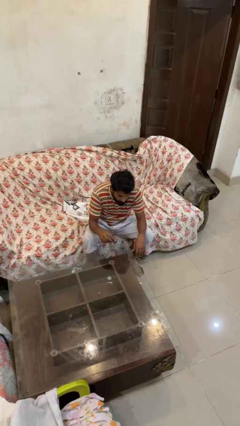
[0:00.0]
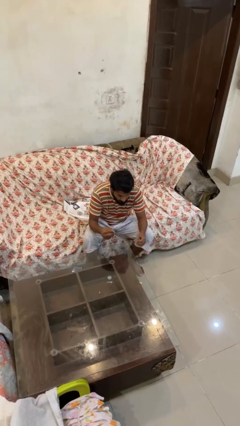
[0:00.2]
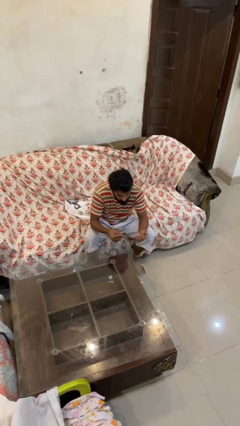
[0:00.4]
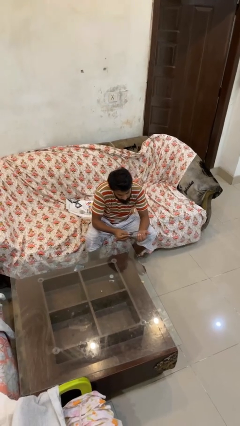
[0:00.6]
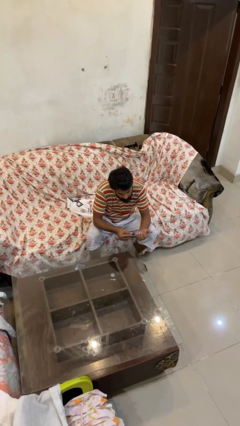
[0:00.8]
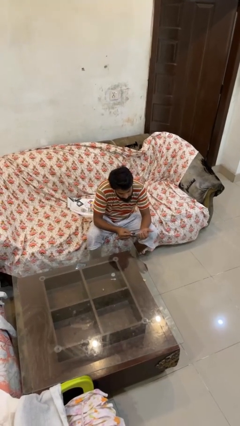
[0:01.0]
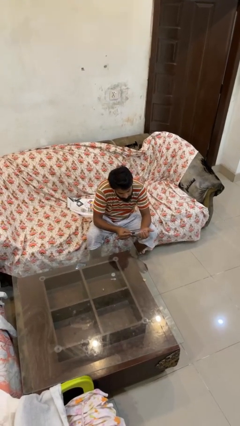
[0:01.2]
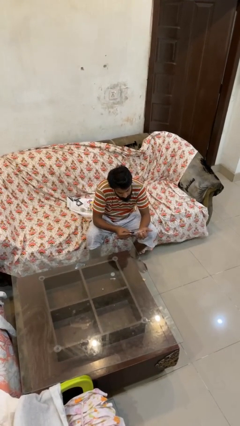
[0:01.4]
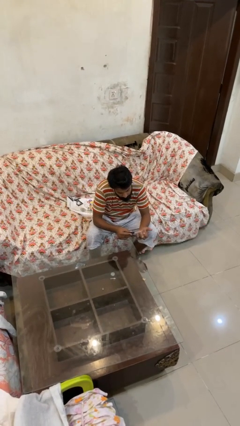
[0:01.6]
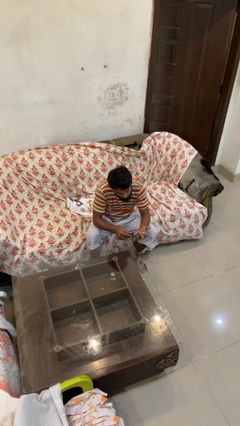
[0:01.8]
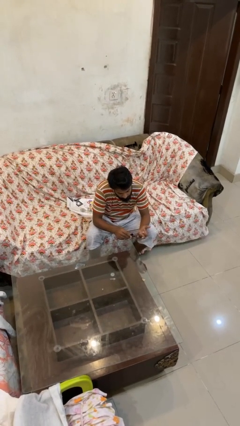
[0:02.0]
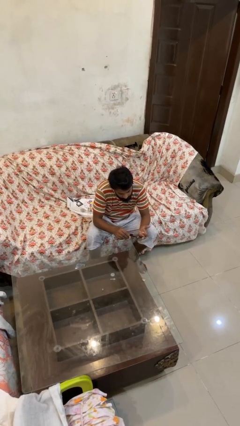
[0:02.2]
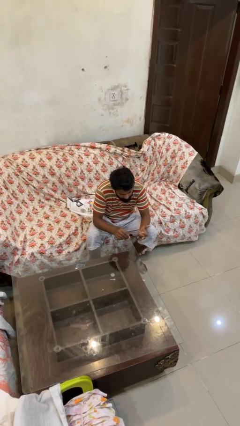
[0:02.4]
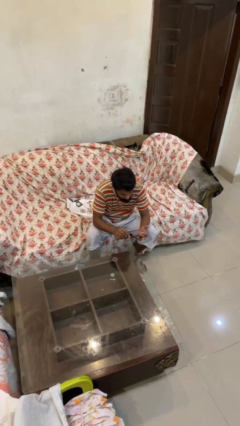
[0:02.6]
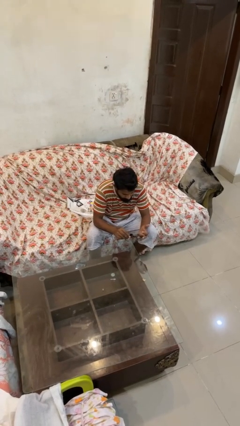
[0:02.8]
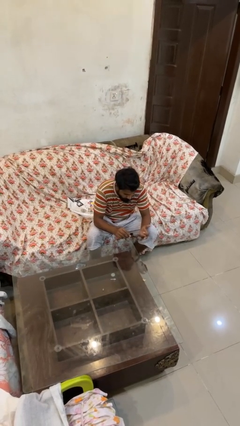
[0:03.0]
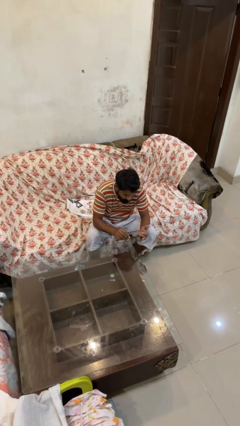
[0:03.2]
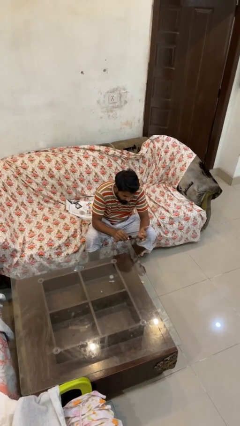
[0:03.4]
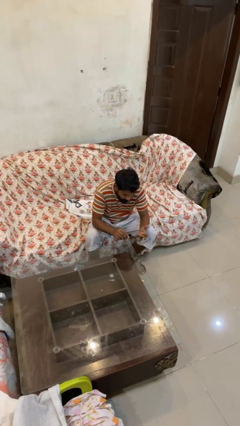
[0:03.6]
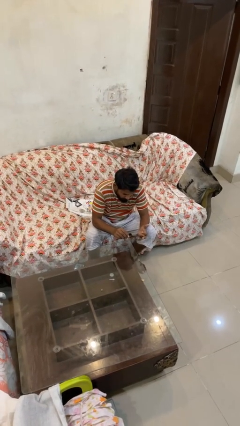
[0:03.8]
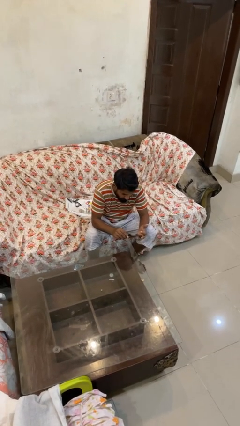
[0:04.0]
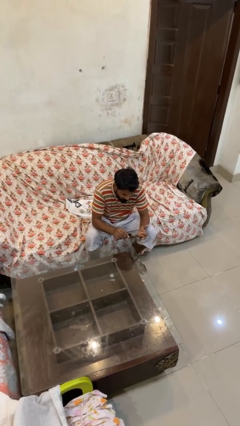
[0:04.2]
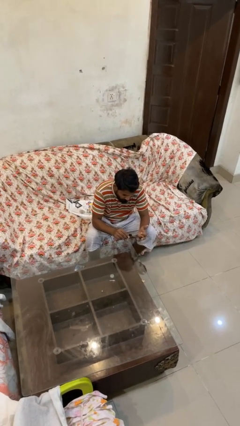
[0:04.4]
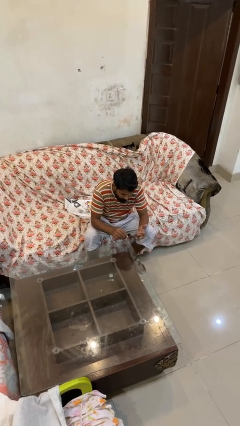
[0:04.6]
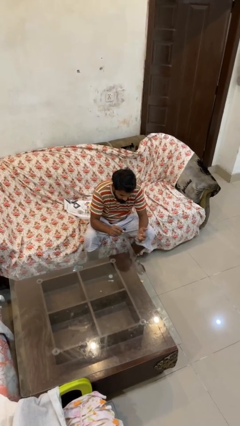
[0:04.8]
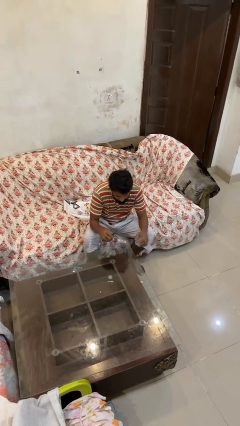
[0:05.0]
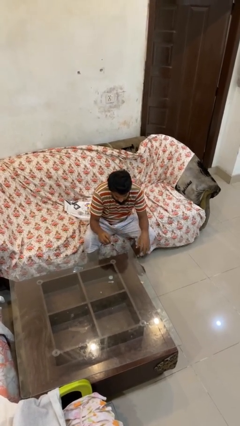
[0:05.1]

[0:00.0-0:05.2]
person files fingernails

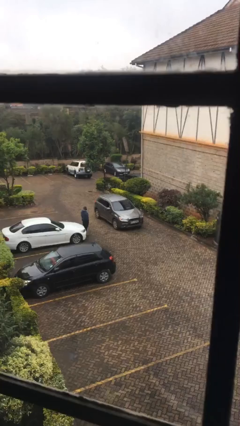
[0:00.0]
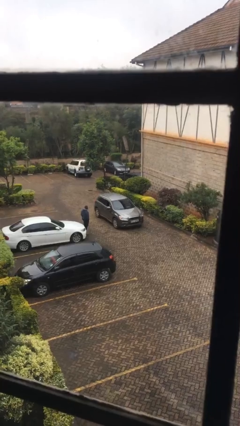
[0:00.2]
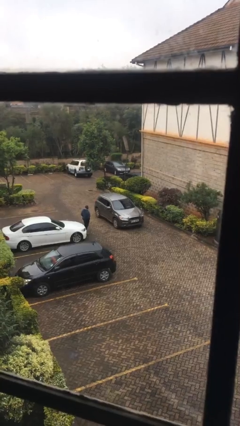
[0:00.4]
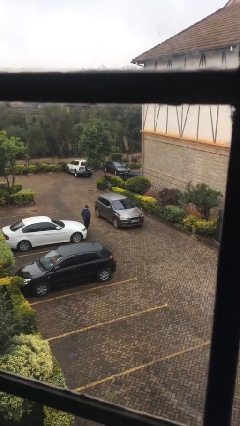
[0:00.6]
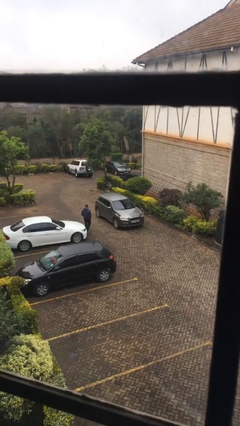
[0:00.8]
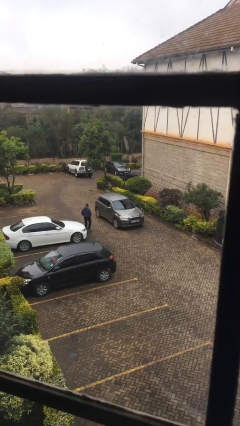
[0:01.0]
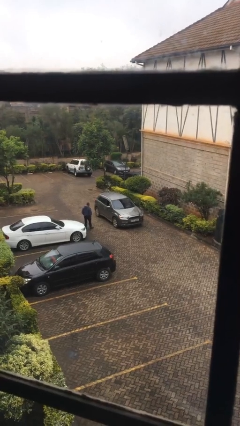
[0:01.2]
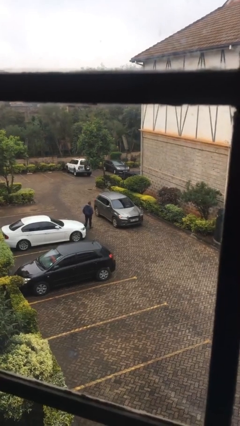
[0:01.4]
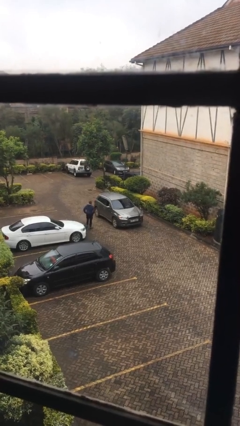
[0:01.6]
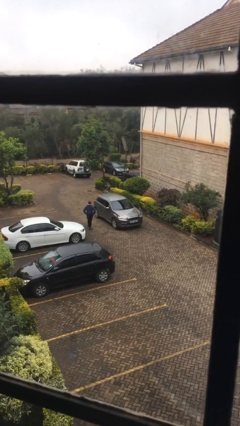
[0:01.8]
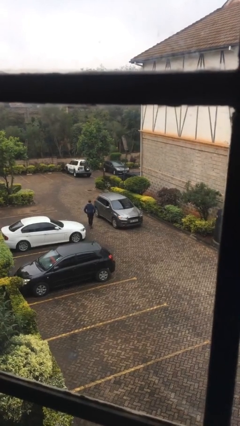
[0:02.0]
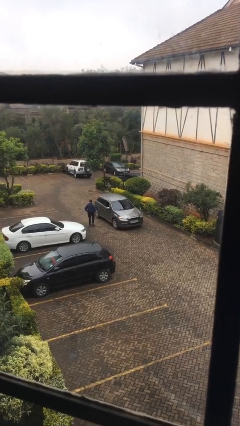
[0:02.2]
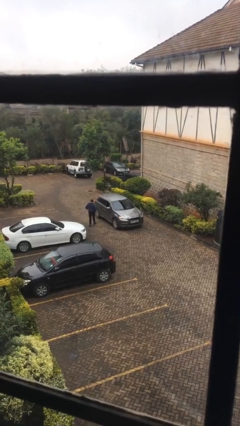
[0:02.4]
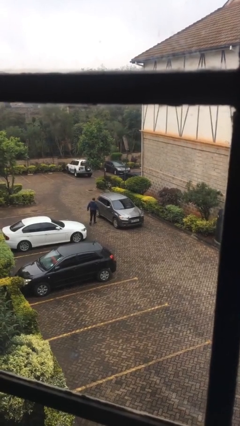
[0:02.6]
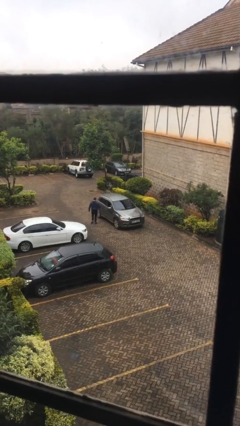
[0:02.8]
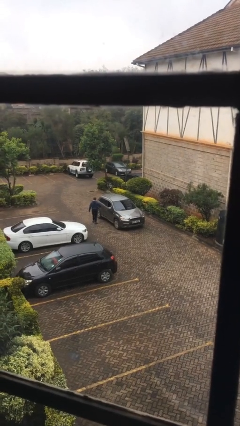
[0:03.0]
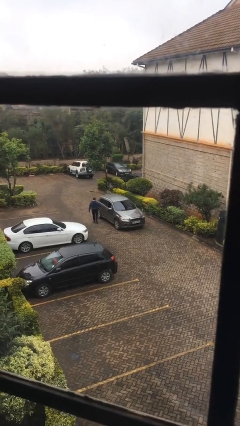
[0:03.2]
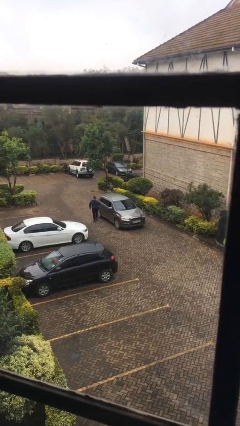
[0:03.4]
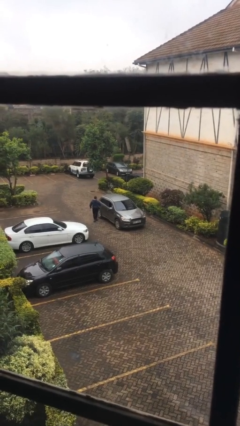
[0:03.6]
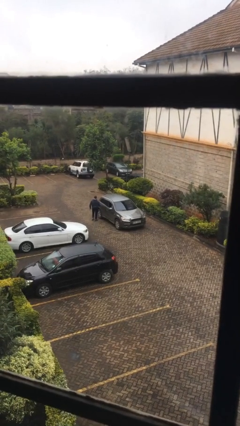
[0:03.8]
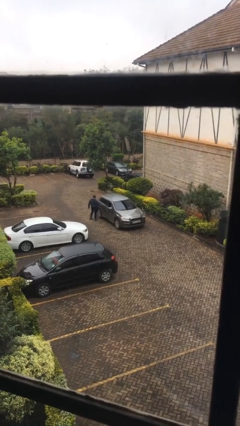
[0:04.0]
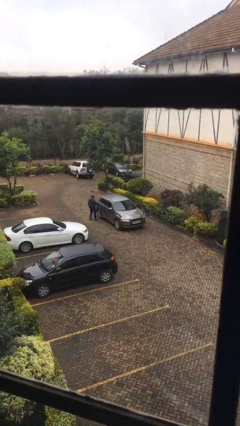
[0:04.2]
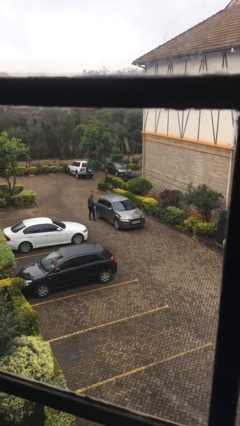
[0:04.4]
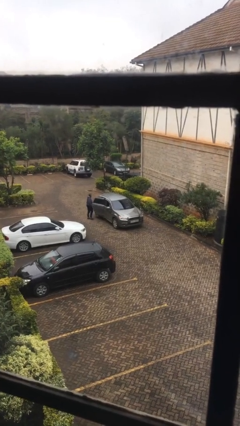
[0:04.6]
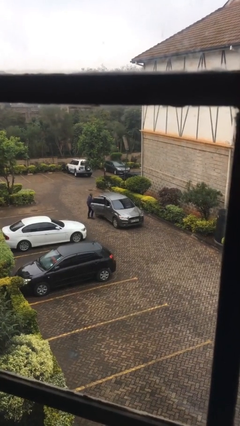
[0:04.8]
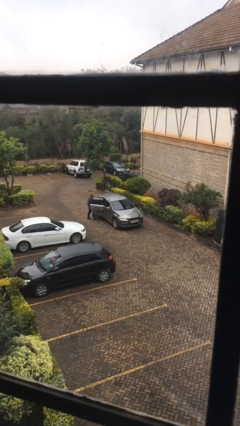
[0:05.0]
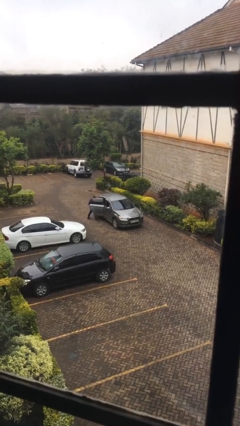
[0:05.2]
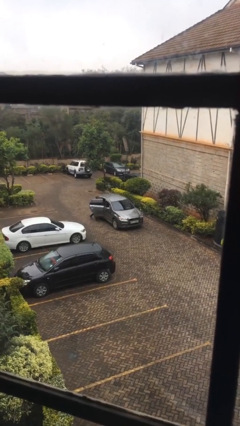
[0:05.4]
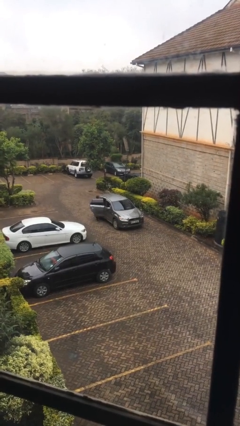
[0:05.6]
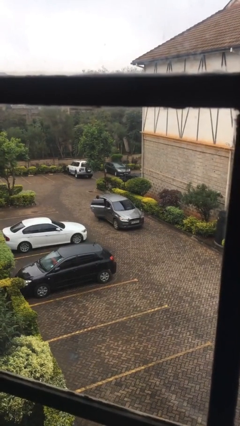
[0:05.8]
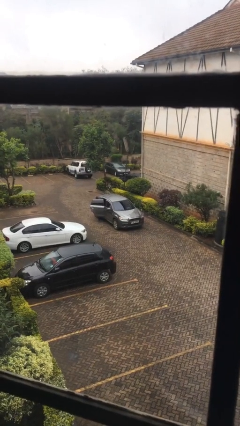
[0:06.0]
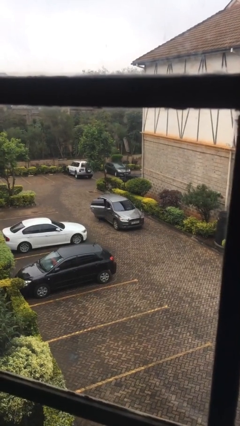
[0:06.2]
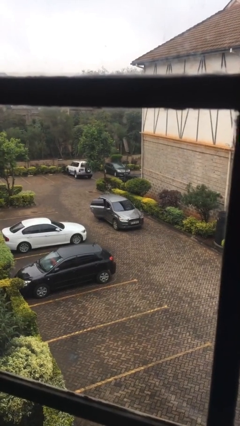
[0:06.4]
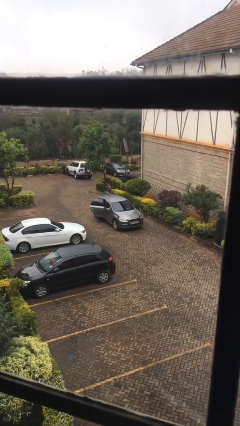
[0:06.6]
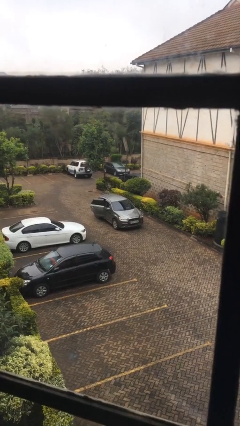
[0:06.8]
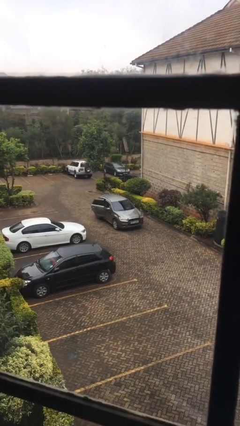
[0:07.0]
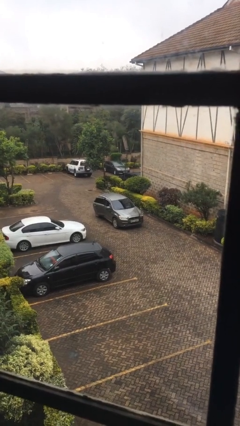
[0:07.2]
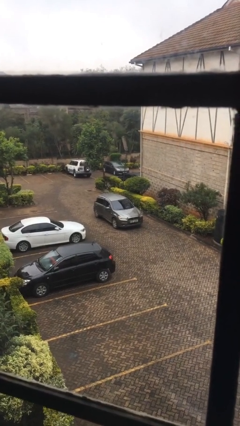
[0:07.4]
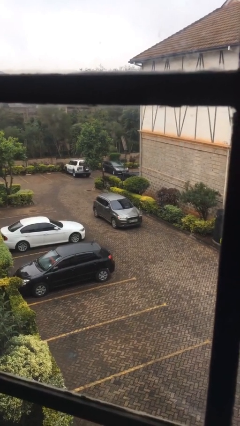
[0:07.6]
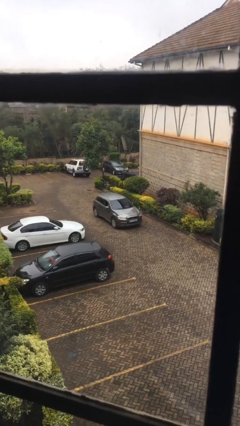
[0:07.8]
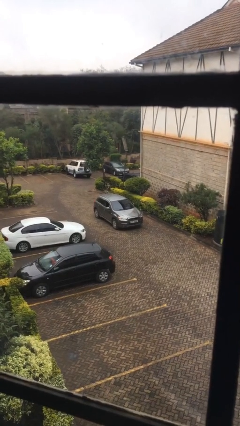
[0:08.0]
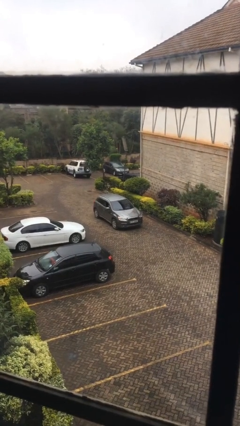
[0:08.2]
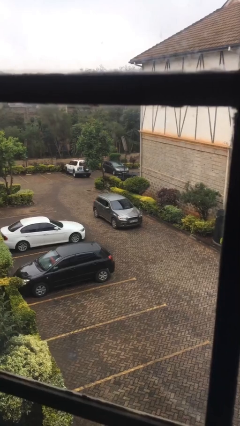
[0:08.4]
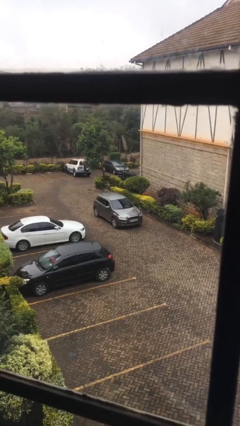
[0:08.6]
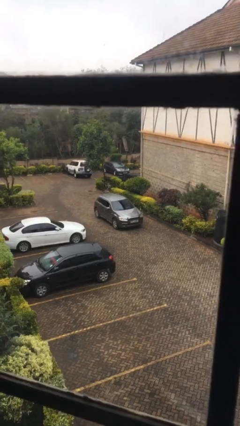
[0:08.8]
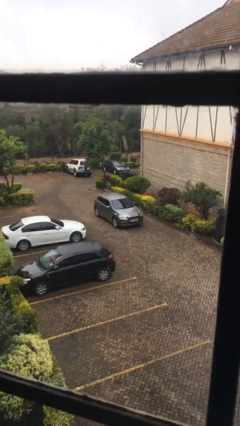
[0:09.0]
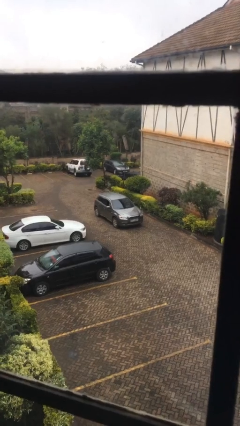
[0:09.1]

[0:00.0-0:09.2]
car picks up person

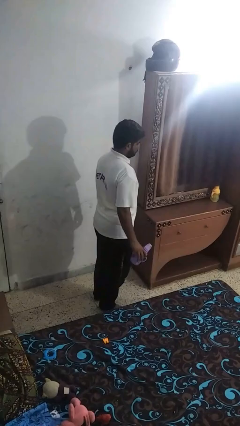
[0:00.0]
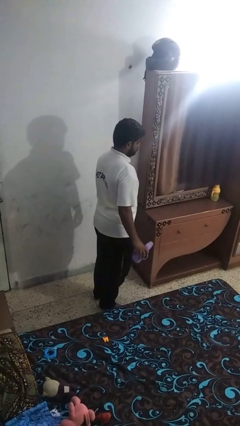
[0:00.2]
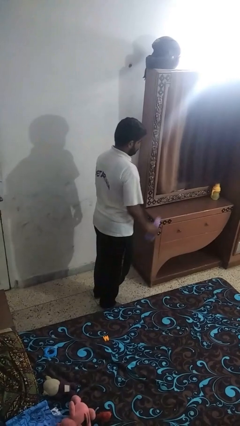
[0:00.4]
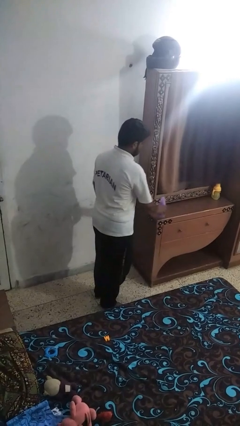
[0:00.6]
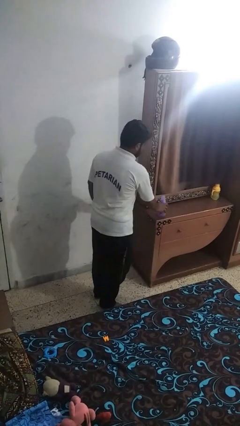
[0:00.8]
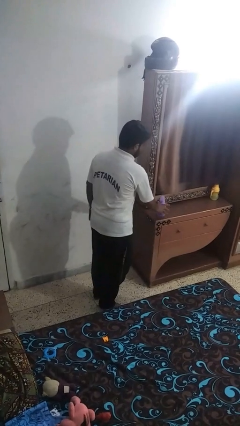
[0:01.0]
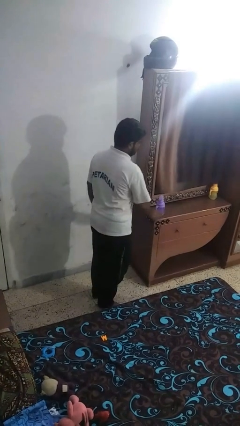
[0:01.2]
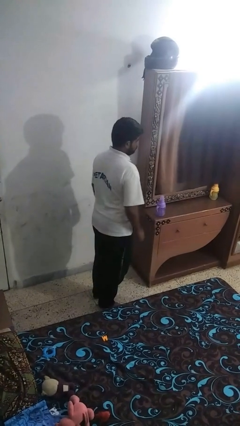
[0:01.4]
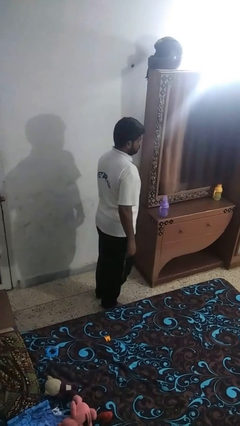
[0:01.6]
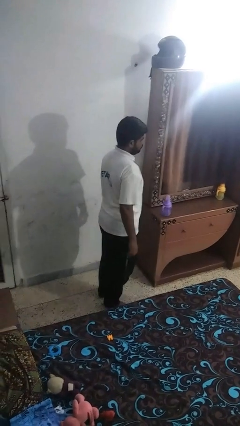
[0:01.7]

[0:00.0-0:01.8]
person puts down object on countertop

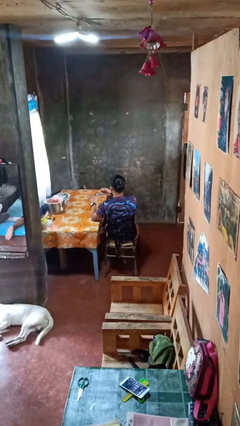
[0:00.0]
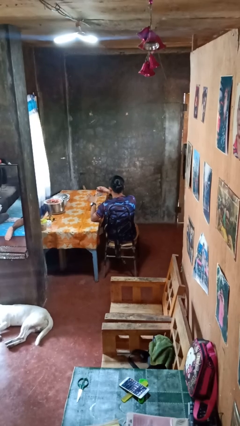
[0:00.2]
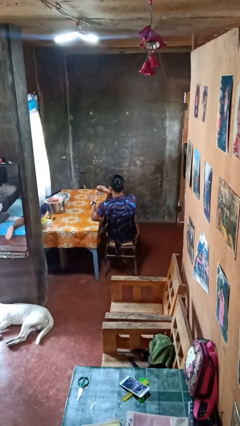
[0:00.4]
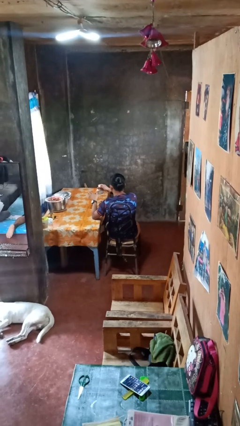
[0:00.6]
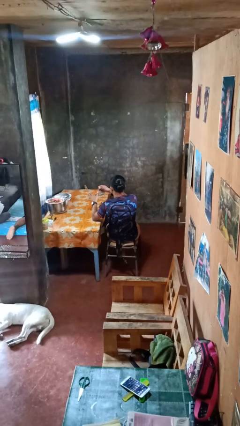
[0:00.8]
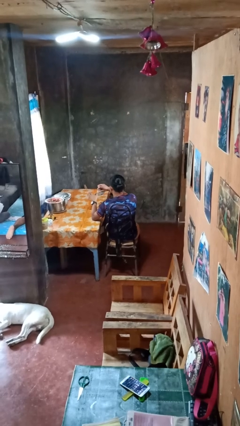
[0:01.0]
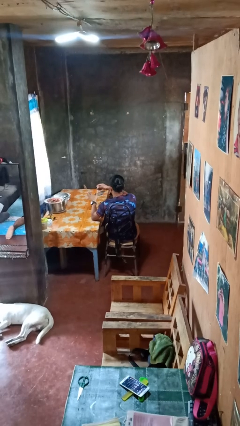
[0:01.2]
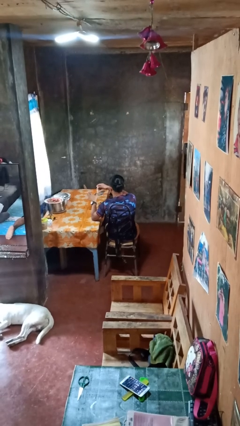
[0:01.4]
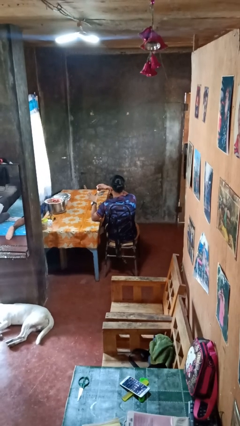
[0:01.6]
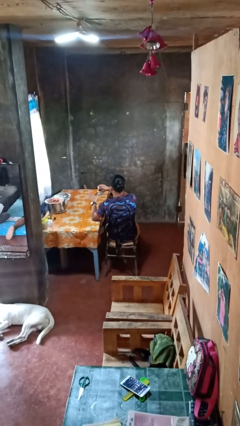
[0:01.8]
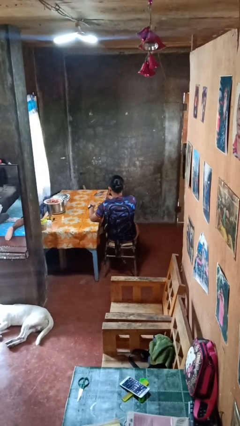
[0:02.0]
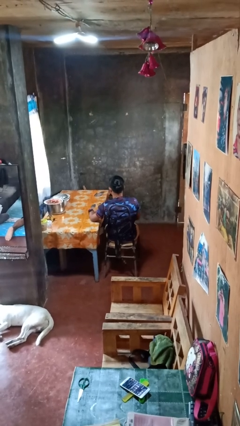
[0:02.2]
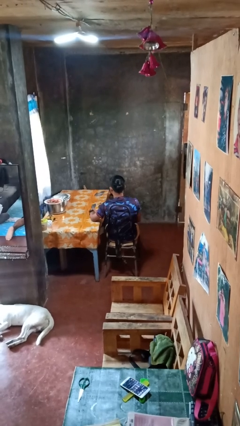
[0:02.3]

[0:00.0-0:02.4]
person clips fingernails
